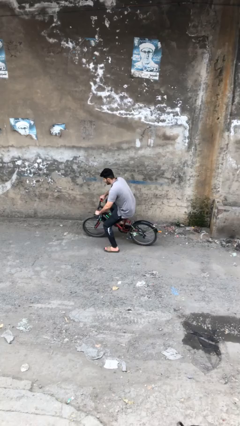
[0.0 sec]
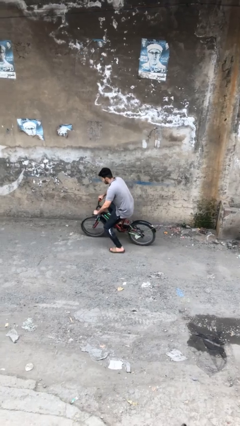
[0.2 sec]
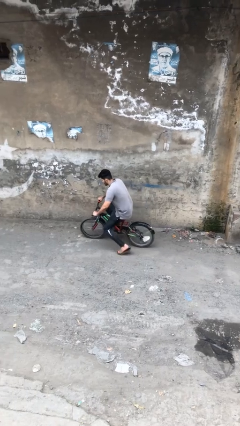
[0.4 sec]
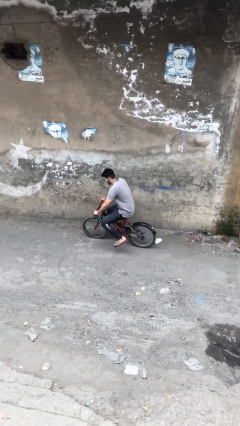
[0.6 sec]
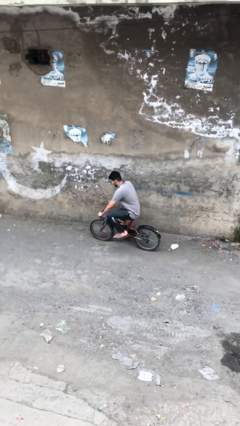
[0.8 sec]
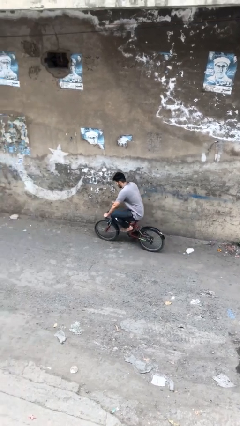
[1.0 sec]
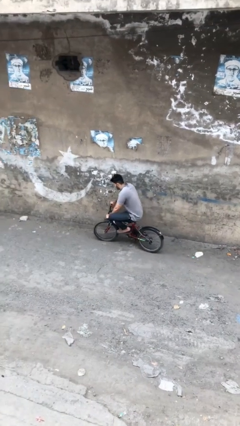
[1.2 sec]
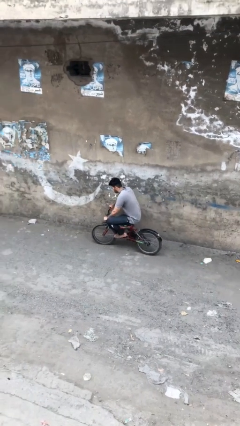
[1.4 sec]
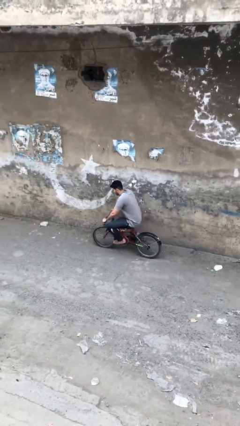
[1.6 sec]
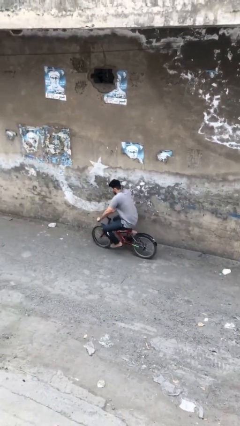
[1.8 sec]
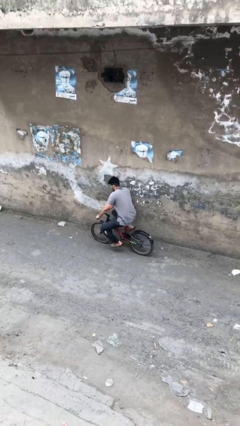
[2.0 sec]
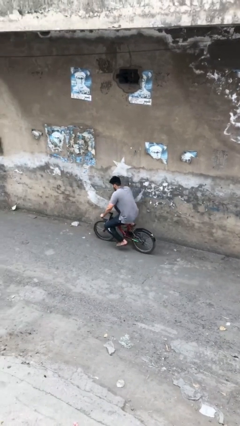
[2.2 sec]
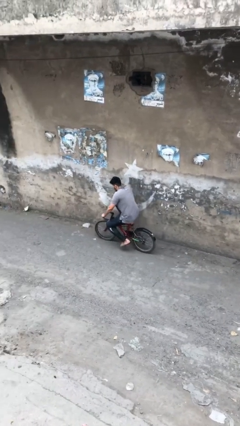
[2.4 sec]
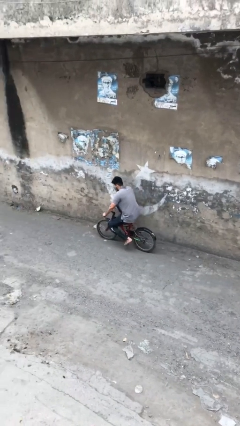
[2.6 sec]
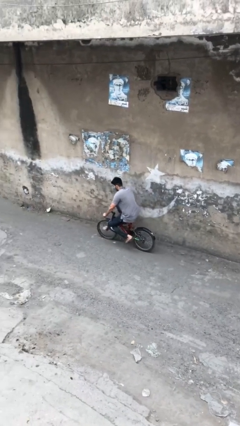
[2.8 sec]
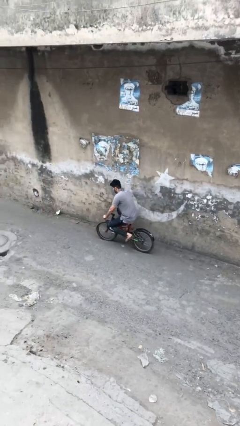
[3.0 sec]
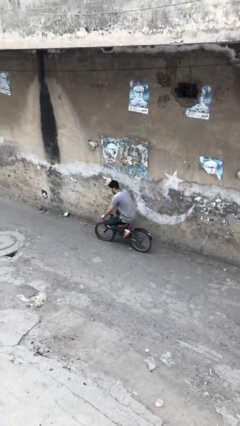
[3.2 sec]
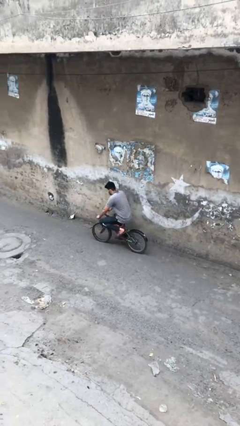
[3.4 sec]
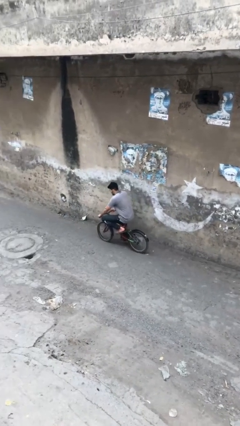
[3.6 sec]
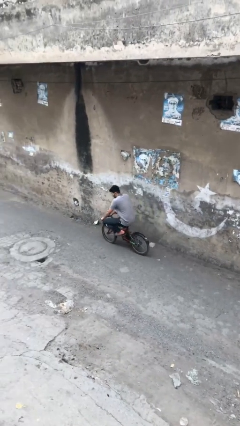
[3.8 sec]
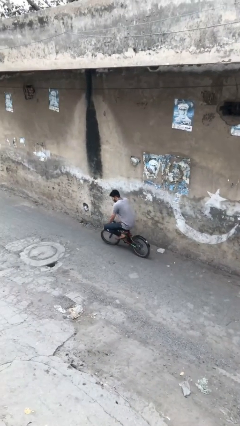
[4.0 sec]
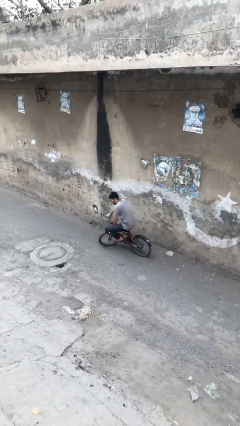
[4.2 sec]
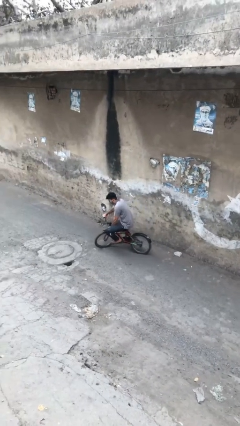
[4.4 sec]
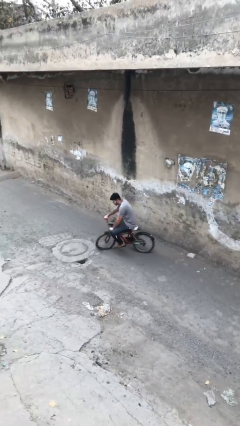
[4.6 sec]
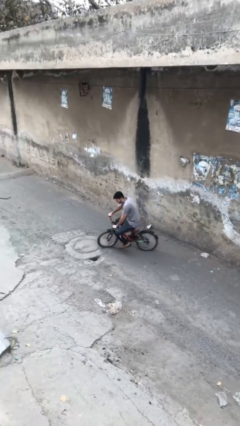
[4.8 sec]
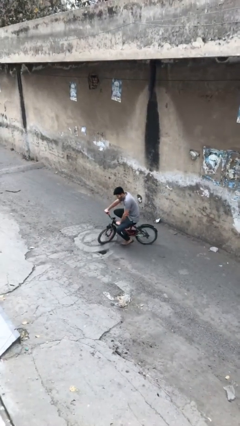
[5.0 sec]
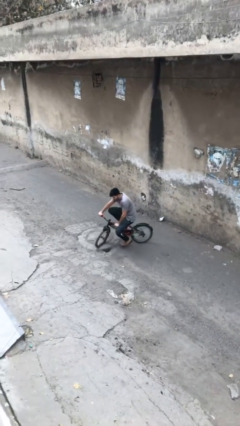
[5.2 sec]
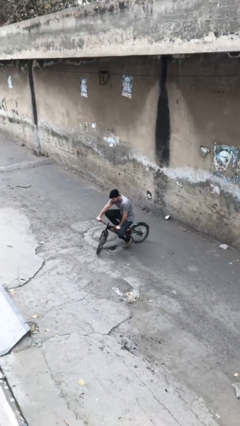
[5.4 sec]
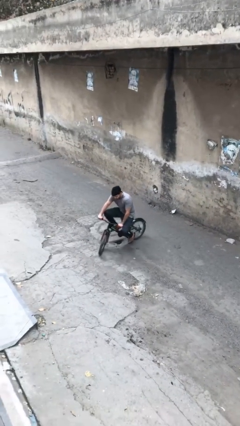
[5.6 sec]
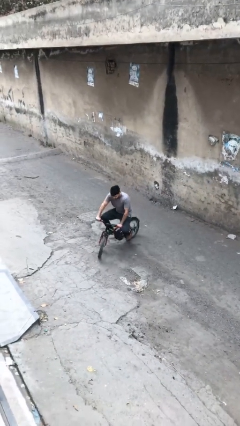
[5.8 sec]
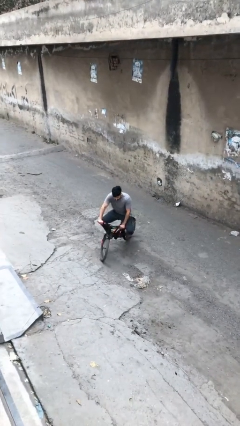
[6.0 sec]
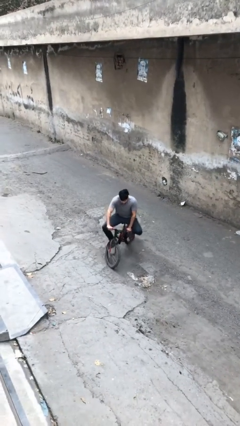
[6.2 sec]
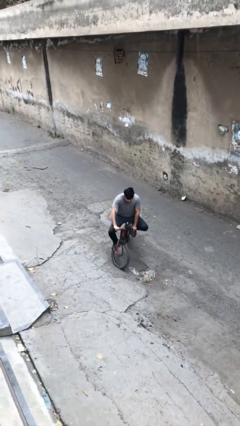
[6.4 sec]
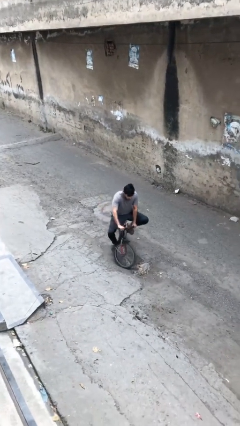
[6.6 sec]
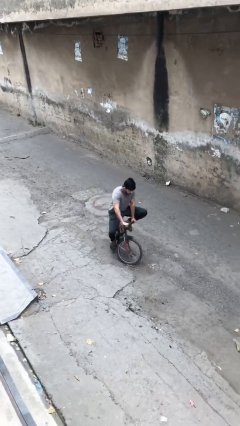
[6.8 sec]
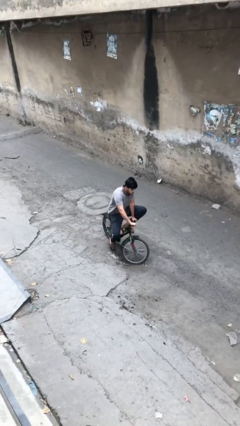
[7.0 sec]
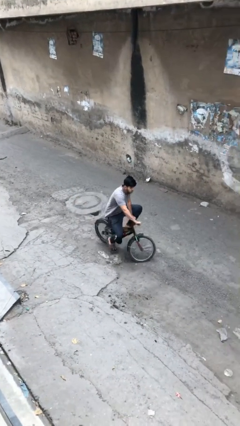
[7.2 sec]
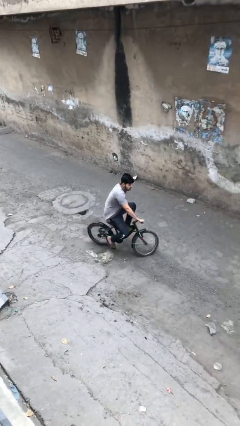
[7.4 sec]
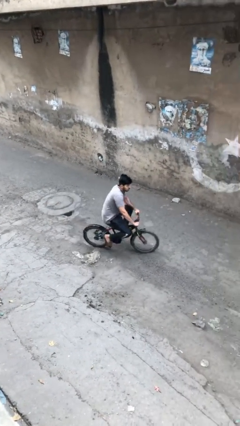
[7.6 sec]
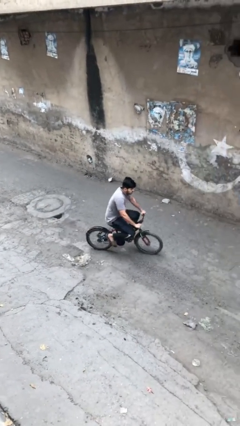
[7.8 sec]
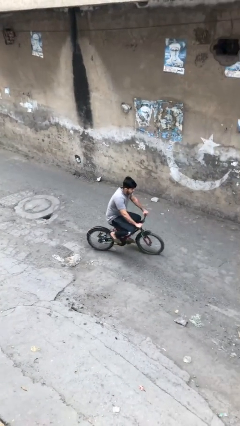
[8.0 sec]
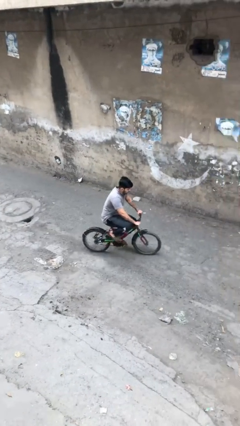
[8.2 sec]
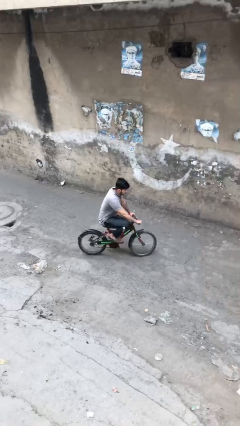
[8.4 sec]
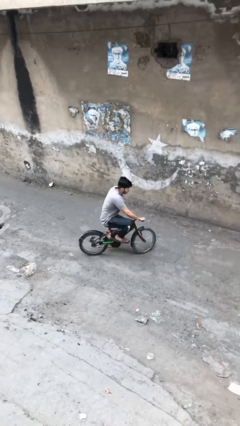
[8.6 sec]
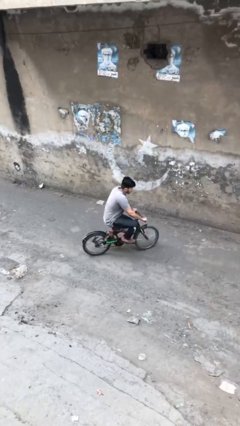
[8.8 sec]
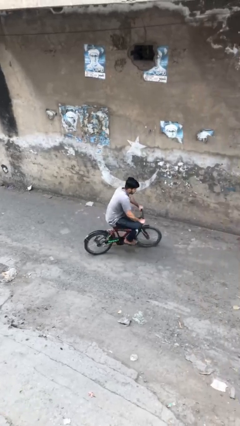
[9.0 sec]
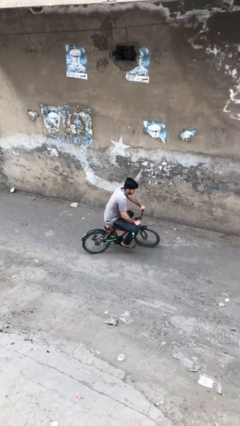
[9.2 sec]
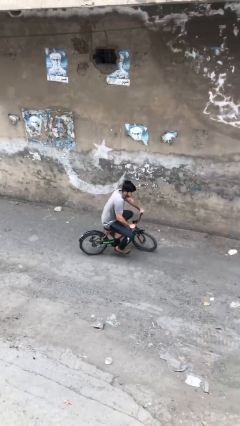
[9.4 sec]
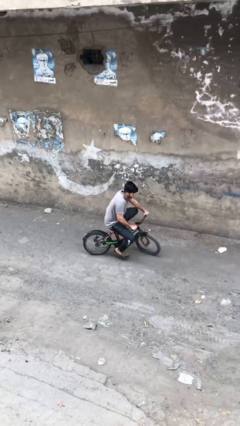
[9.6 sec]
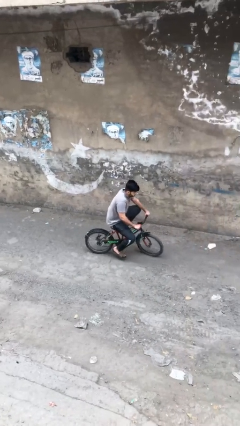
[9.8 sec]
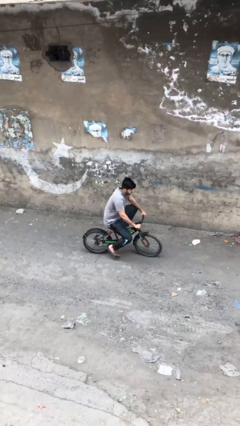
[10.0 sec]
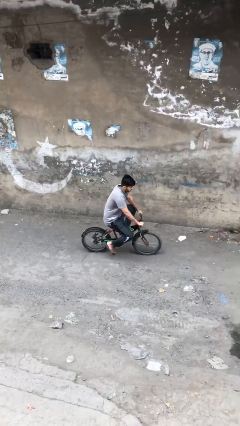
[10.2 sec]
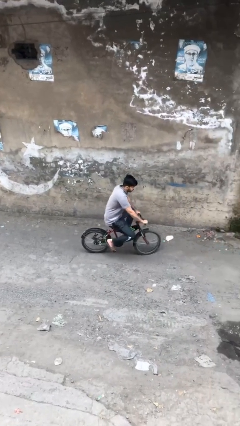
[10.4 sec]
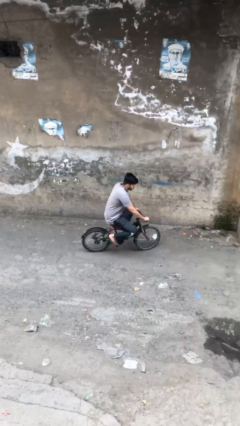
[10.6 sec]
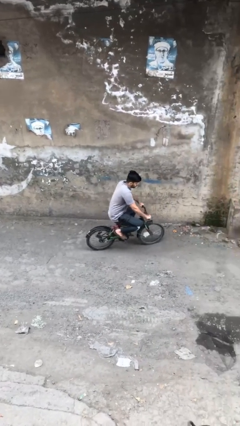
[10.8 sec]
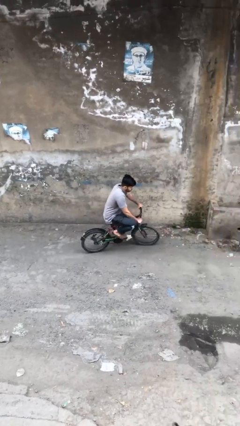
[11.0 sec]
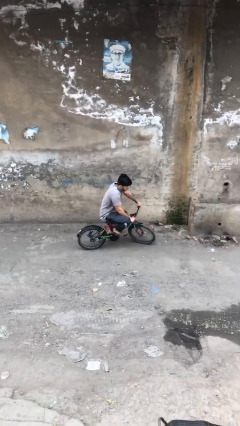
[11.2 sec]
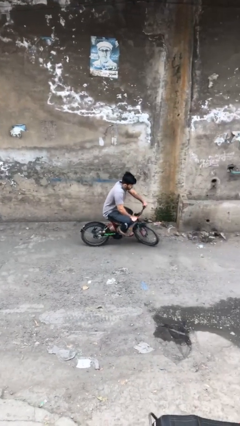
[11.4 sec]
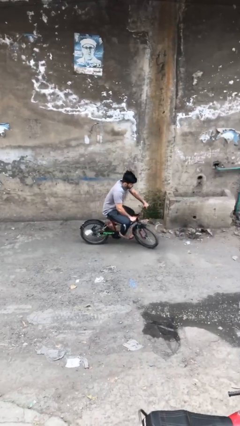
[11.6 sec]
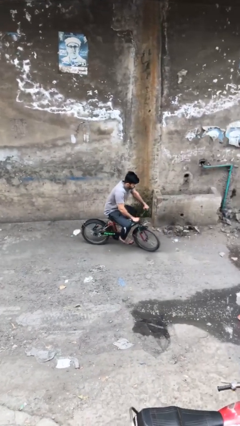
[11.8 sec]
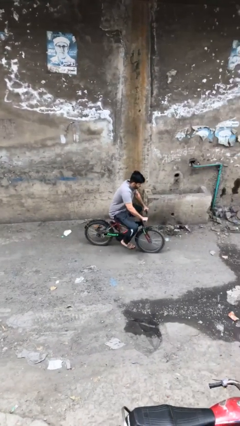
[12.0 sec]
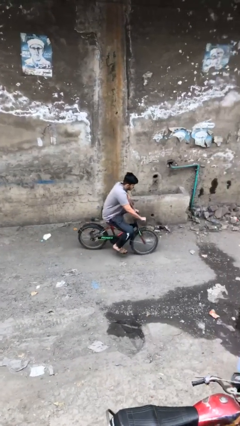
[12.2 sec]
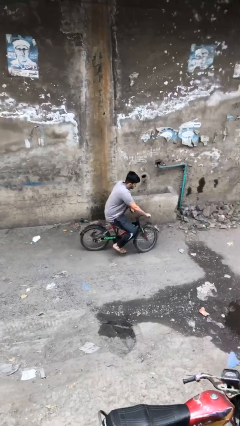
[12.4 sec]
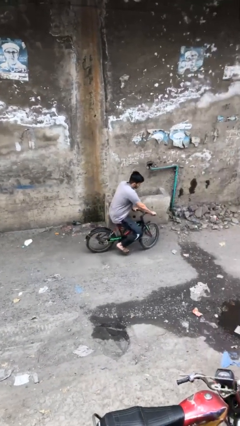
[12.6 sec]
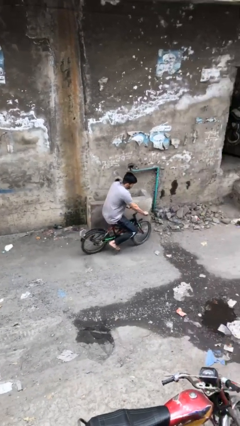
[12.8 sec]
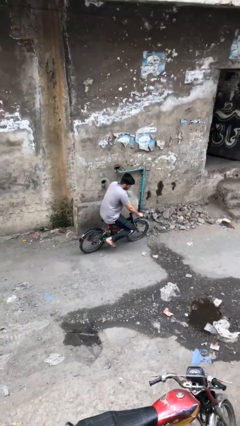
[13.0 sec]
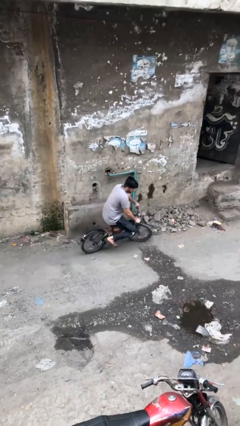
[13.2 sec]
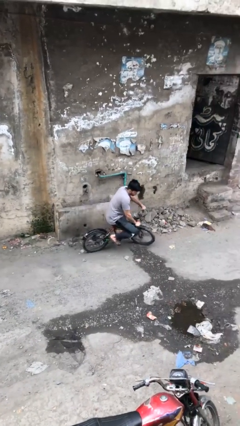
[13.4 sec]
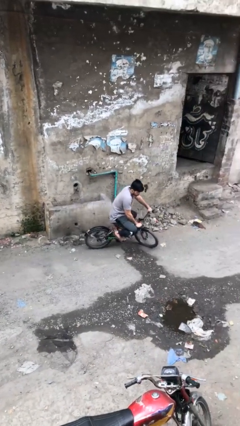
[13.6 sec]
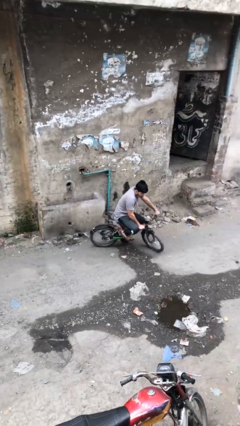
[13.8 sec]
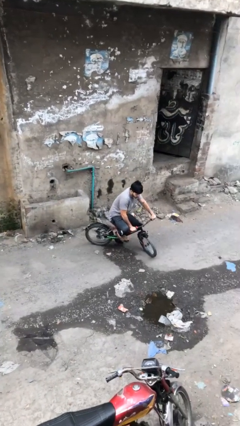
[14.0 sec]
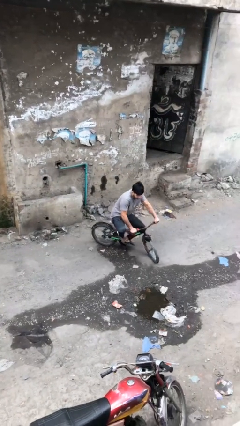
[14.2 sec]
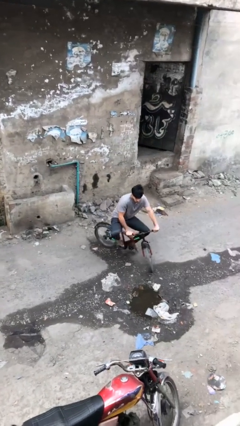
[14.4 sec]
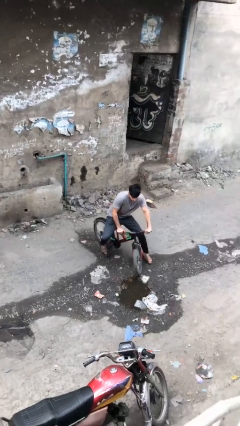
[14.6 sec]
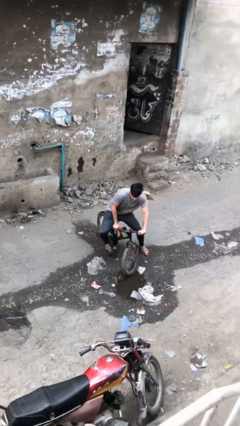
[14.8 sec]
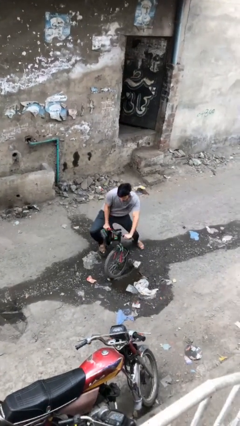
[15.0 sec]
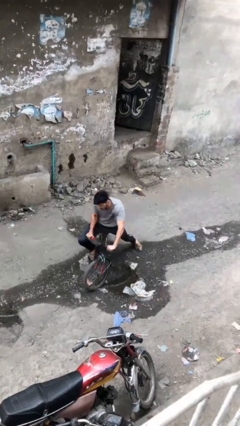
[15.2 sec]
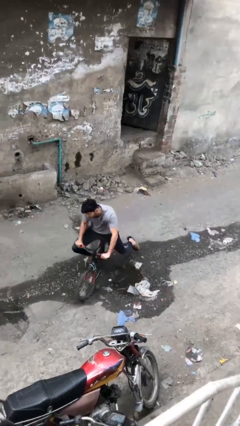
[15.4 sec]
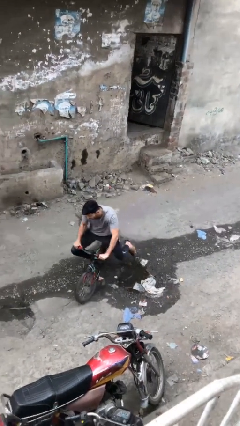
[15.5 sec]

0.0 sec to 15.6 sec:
person rides bicycle

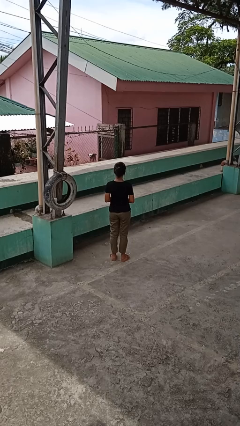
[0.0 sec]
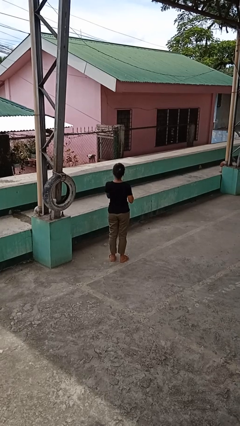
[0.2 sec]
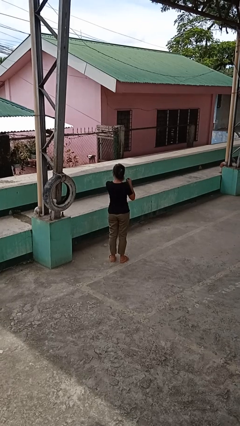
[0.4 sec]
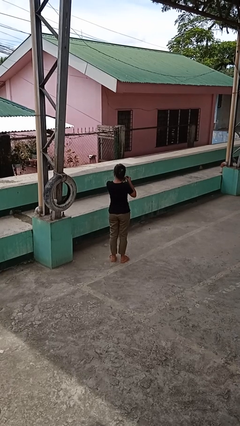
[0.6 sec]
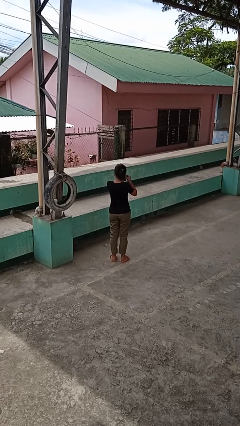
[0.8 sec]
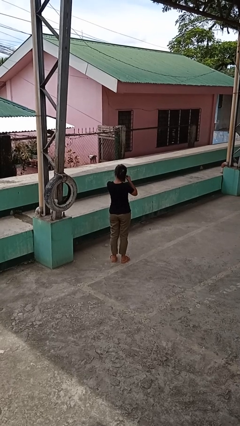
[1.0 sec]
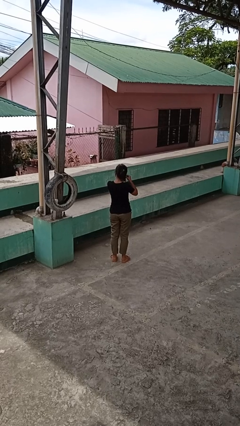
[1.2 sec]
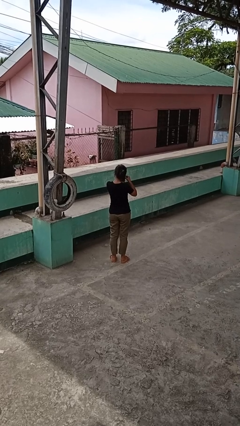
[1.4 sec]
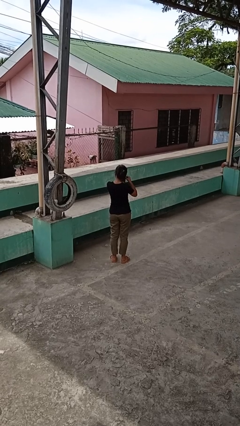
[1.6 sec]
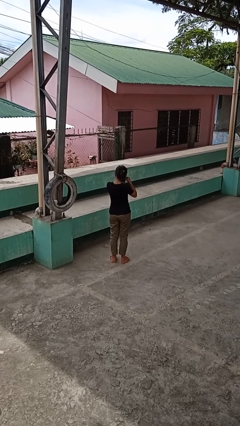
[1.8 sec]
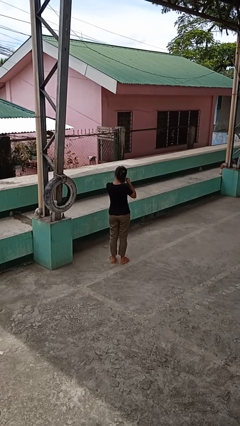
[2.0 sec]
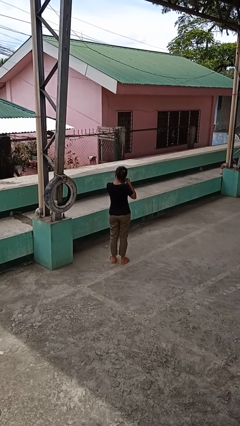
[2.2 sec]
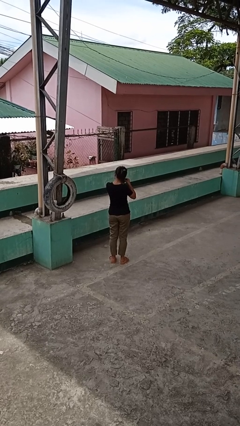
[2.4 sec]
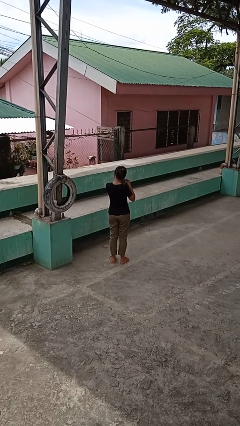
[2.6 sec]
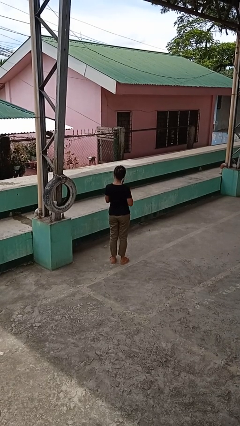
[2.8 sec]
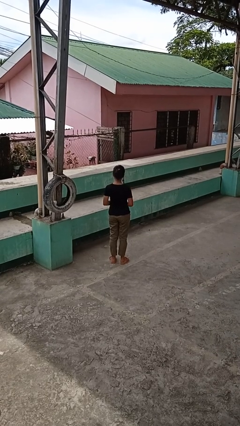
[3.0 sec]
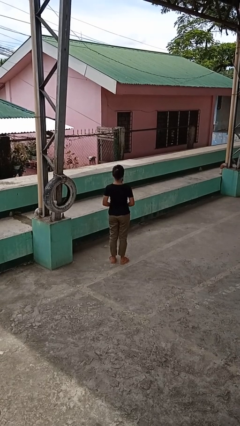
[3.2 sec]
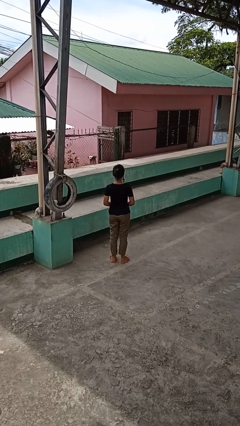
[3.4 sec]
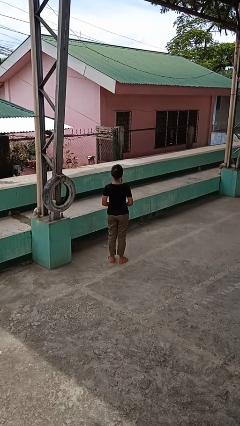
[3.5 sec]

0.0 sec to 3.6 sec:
person puts on earrings
